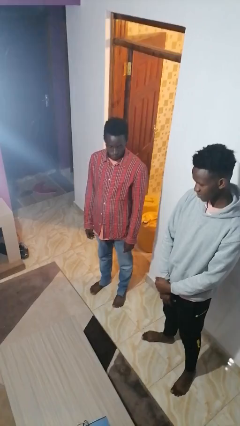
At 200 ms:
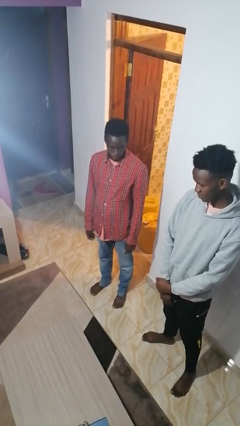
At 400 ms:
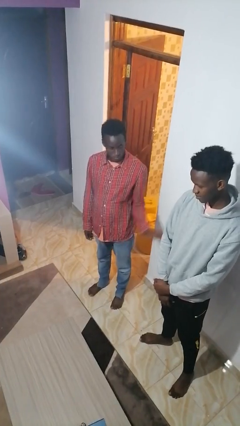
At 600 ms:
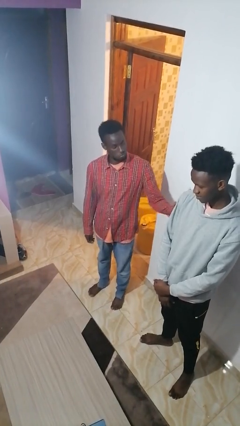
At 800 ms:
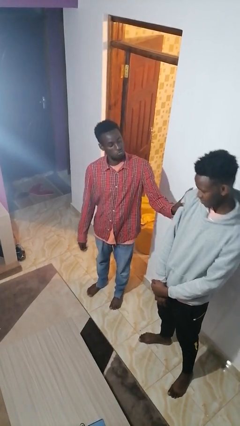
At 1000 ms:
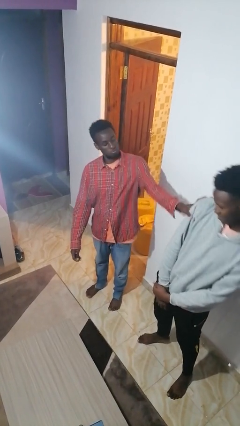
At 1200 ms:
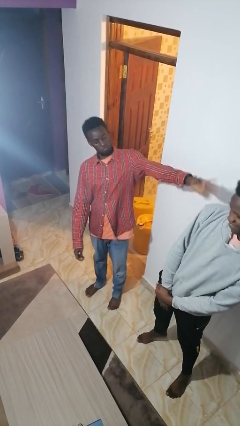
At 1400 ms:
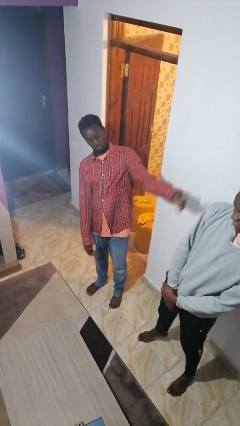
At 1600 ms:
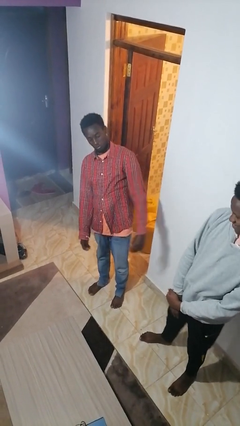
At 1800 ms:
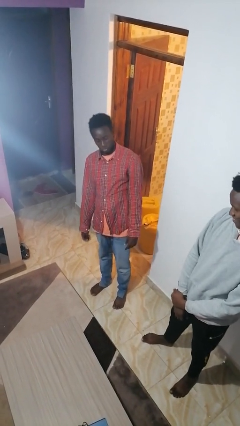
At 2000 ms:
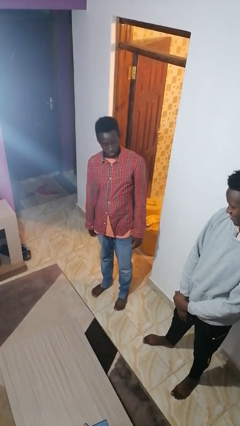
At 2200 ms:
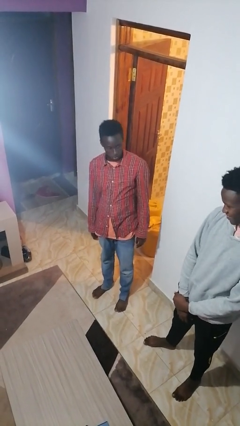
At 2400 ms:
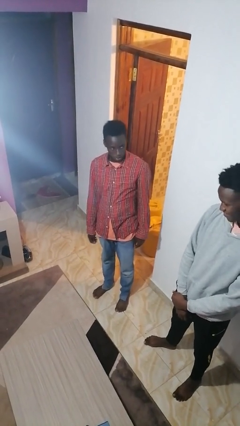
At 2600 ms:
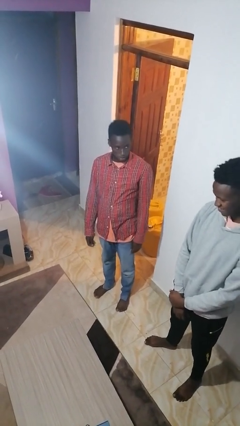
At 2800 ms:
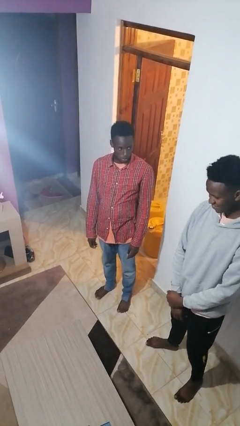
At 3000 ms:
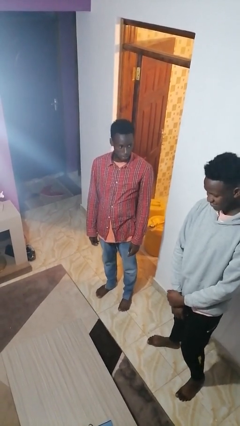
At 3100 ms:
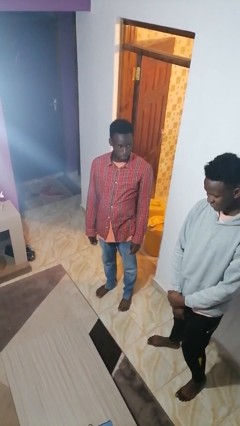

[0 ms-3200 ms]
person shoves person

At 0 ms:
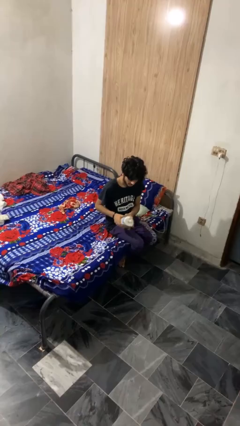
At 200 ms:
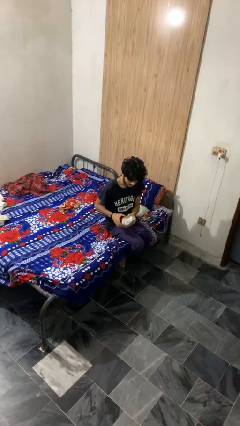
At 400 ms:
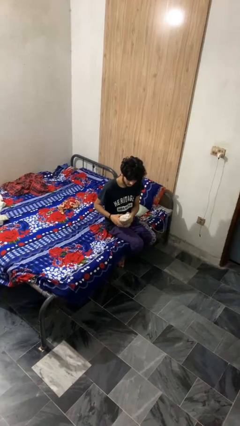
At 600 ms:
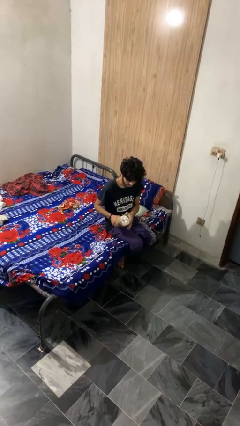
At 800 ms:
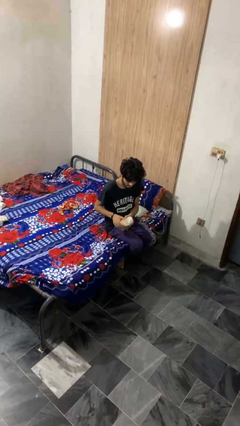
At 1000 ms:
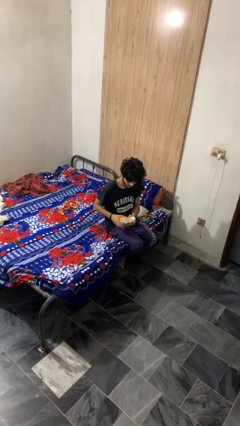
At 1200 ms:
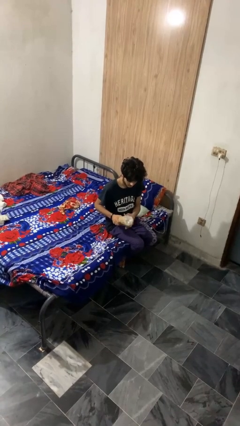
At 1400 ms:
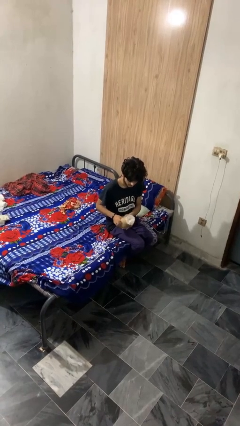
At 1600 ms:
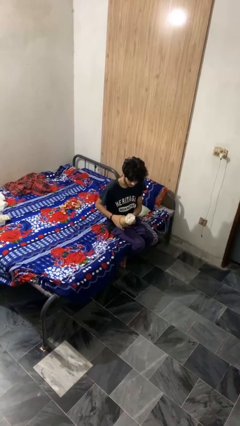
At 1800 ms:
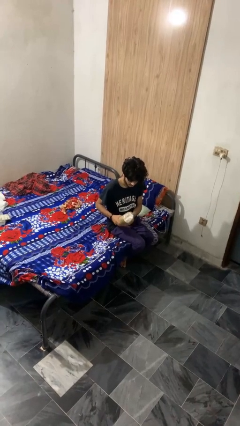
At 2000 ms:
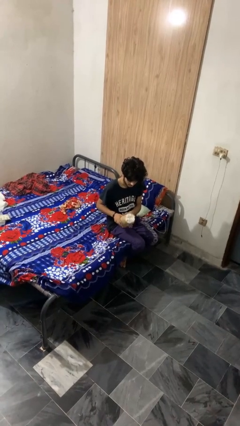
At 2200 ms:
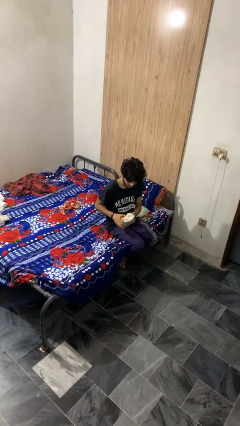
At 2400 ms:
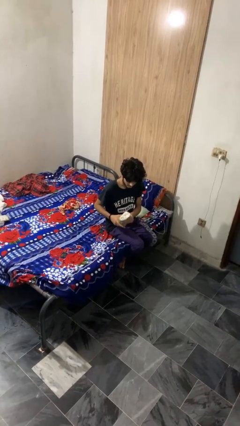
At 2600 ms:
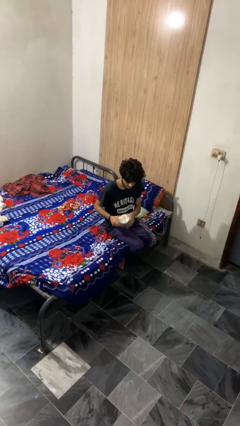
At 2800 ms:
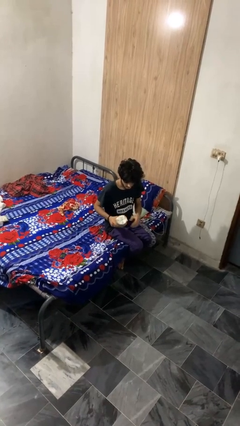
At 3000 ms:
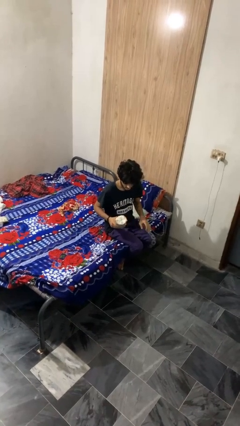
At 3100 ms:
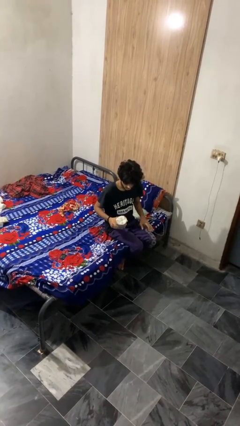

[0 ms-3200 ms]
person squeezes object

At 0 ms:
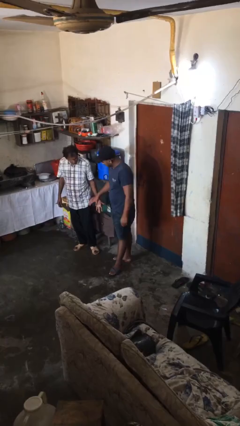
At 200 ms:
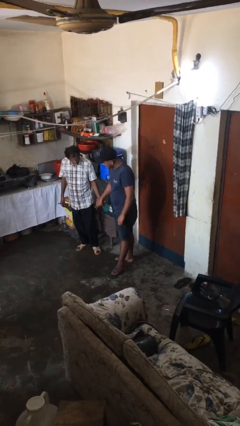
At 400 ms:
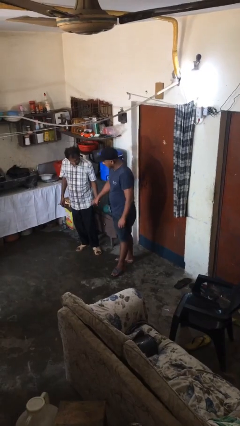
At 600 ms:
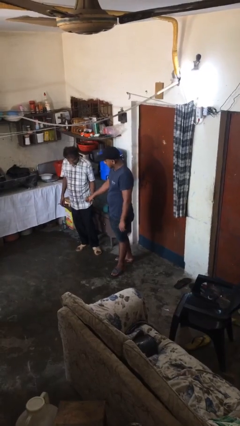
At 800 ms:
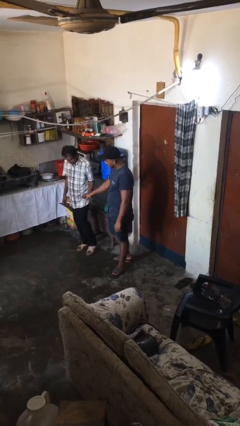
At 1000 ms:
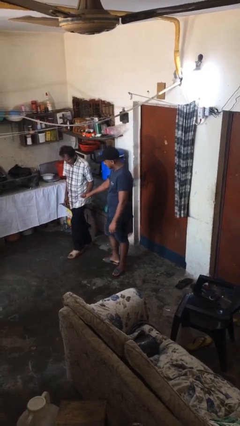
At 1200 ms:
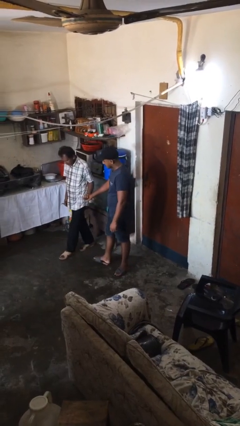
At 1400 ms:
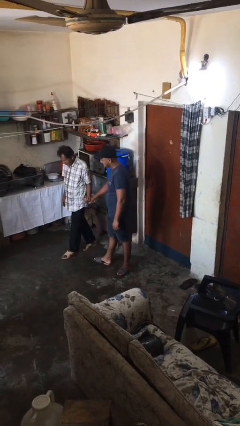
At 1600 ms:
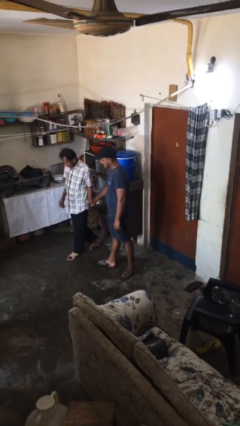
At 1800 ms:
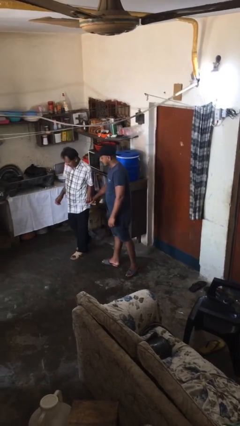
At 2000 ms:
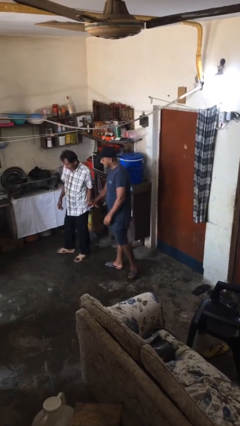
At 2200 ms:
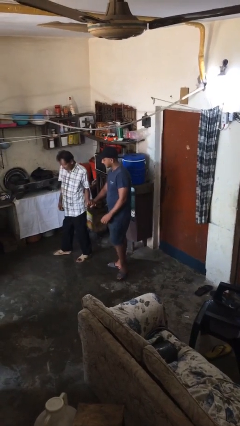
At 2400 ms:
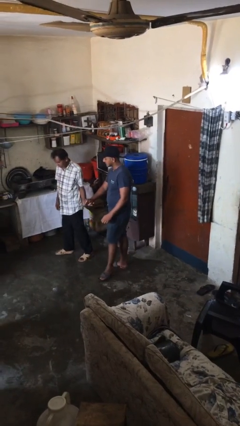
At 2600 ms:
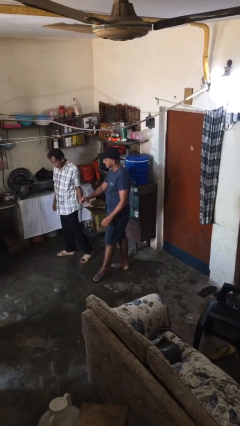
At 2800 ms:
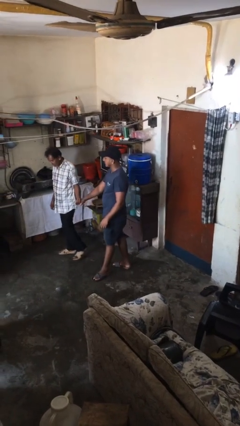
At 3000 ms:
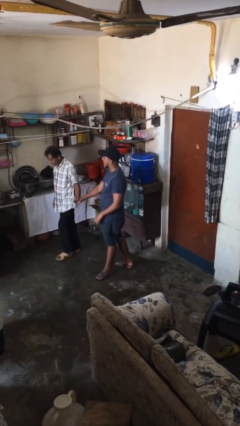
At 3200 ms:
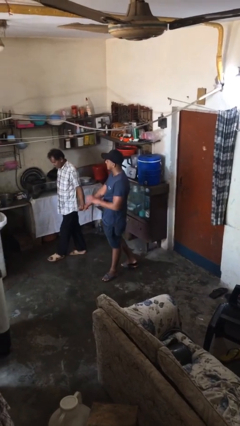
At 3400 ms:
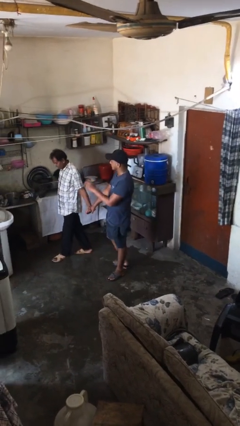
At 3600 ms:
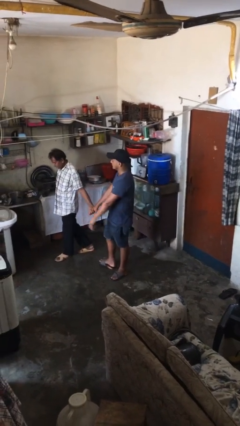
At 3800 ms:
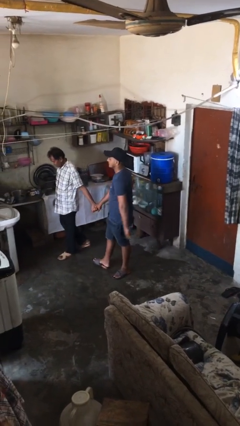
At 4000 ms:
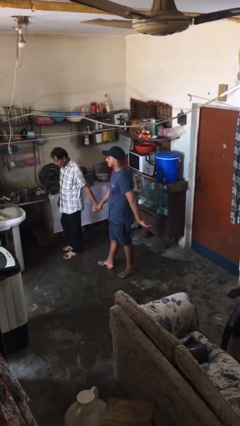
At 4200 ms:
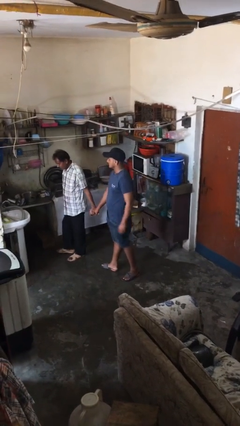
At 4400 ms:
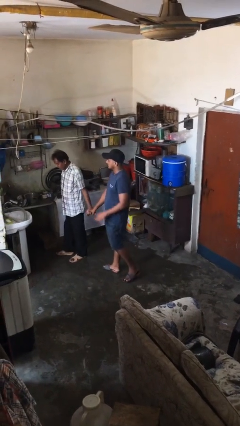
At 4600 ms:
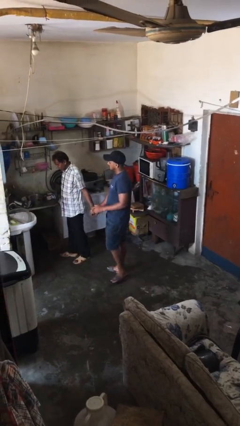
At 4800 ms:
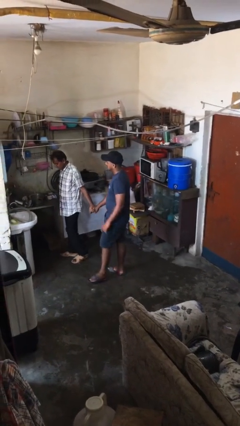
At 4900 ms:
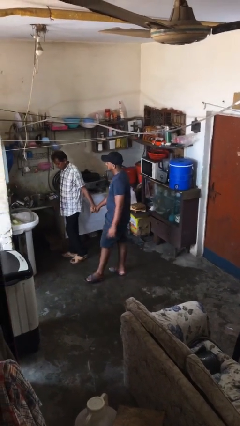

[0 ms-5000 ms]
person holds hand

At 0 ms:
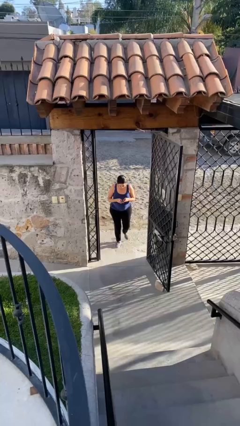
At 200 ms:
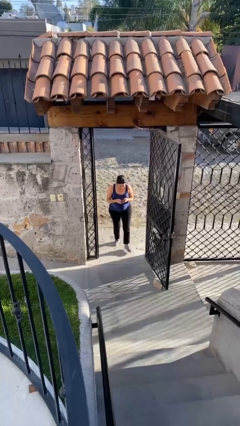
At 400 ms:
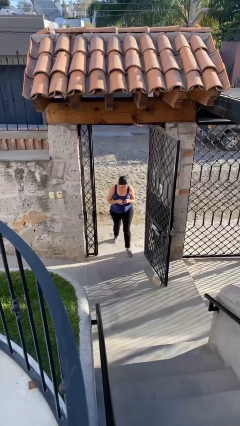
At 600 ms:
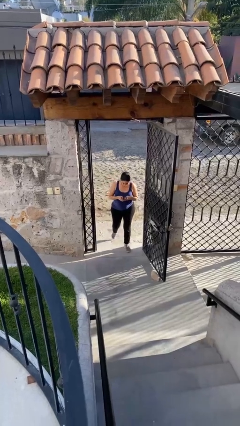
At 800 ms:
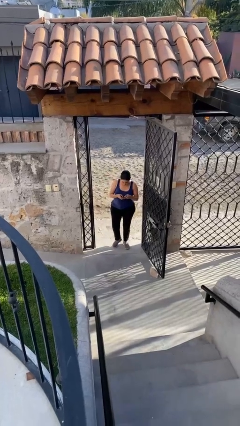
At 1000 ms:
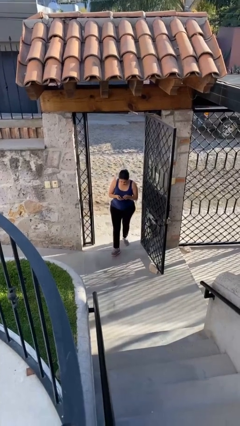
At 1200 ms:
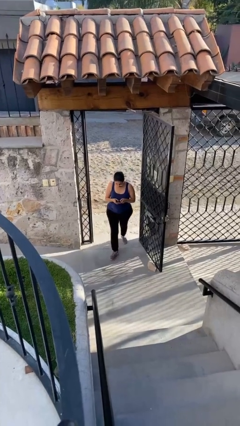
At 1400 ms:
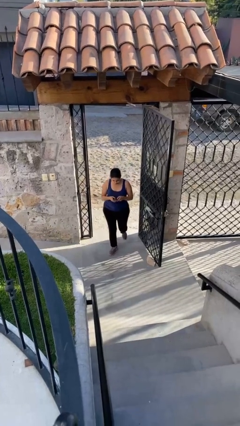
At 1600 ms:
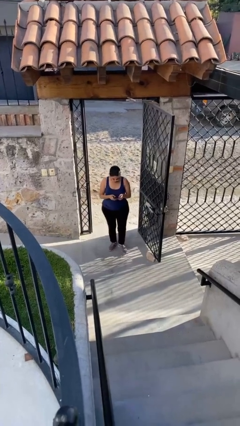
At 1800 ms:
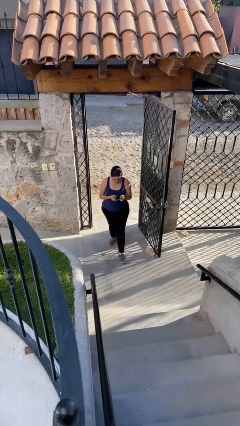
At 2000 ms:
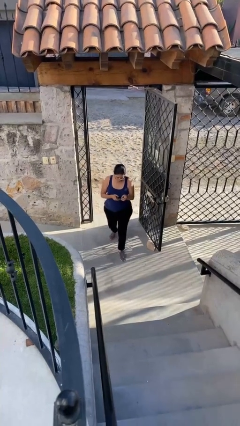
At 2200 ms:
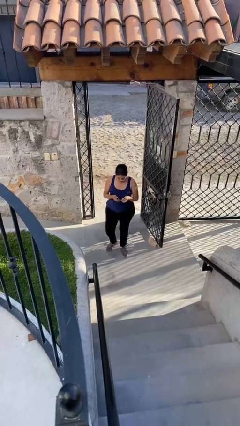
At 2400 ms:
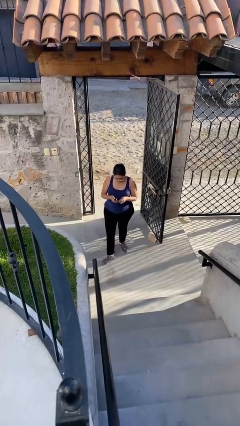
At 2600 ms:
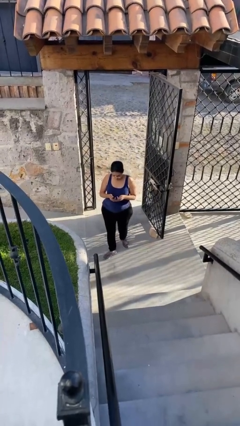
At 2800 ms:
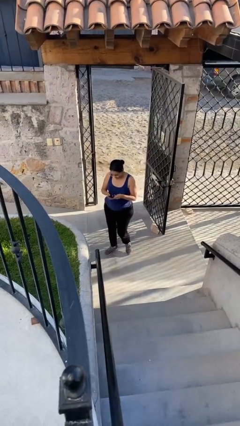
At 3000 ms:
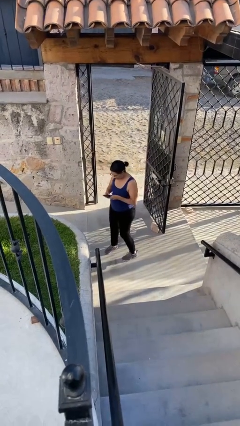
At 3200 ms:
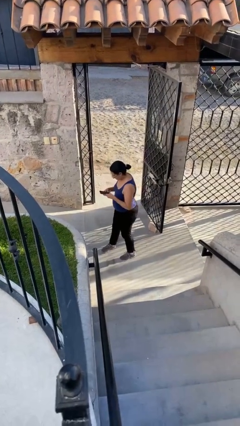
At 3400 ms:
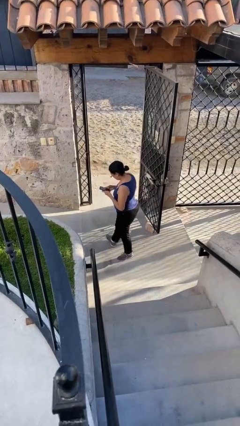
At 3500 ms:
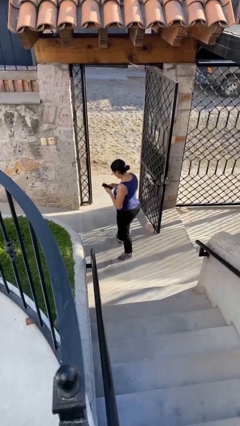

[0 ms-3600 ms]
person enters scene through structure

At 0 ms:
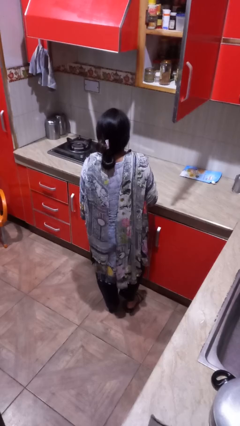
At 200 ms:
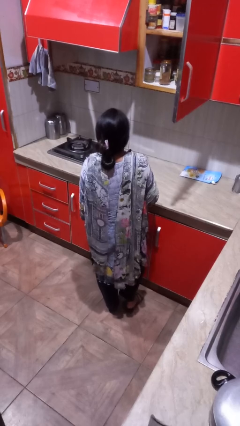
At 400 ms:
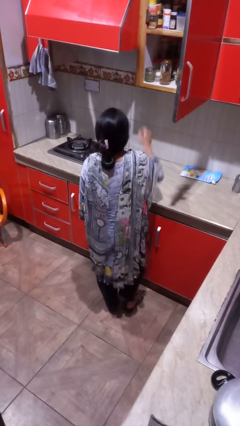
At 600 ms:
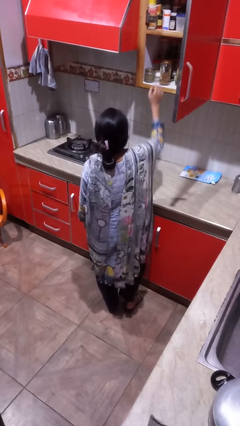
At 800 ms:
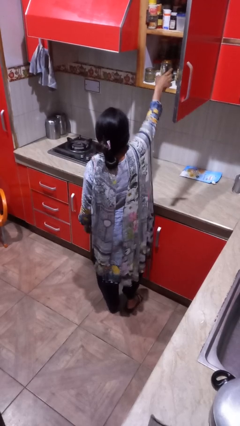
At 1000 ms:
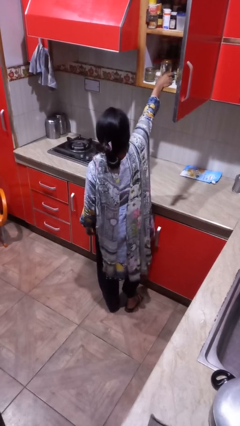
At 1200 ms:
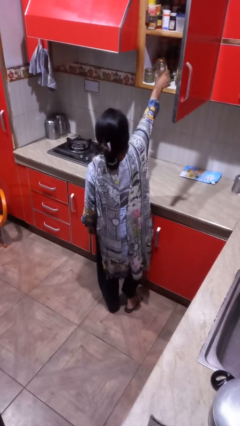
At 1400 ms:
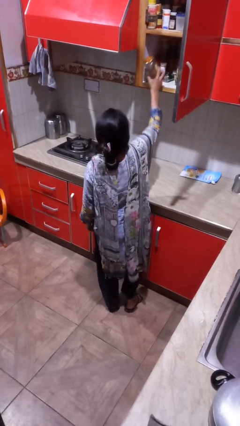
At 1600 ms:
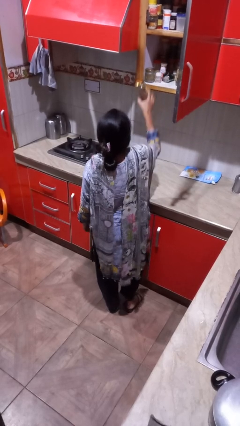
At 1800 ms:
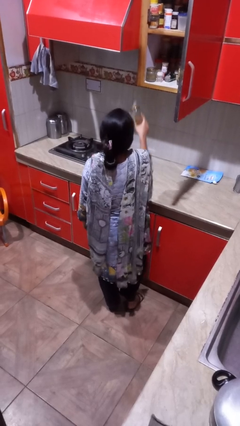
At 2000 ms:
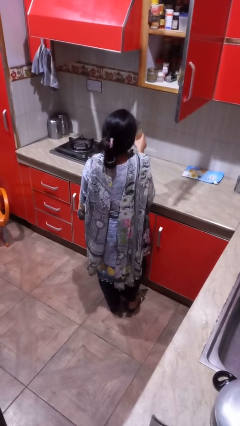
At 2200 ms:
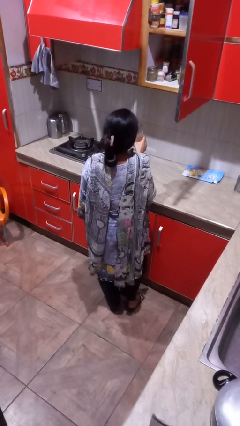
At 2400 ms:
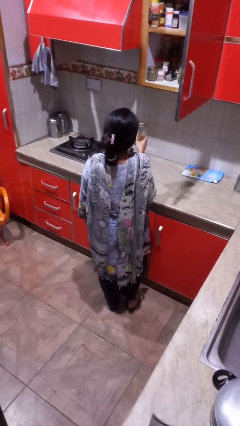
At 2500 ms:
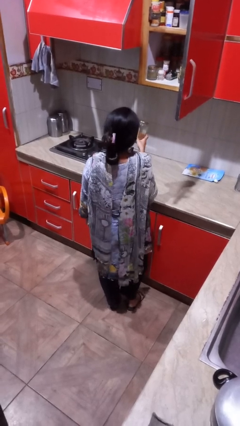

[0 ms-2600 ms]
person takes object from cabinet
